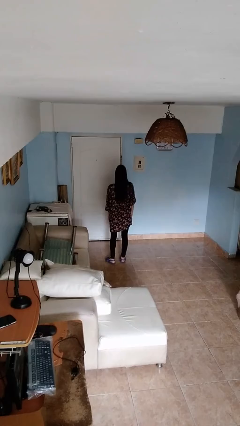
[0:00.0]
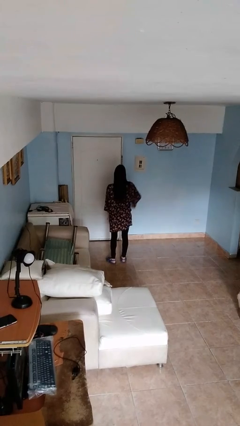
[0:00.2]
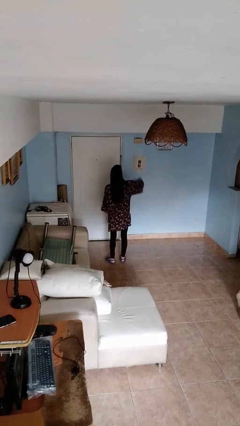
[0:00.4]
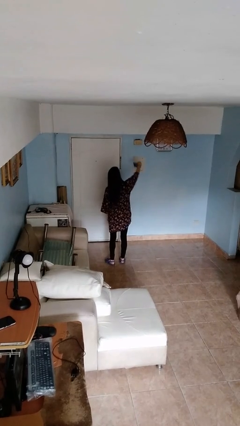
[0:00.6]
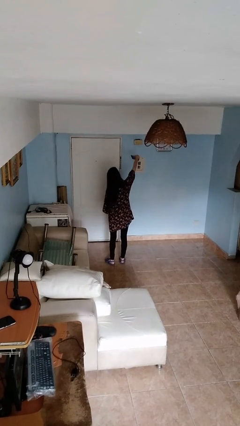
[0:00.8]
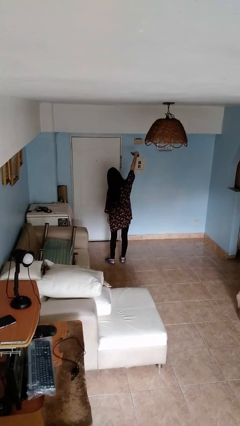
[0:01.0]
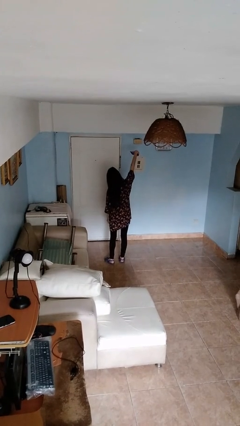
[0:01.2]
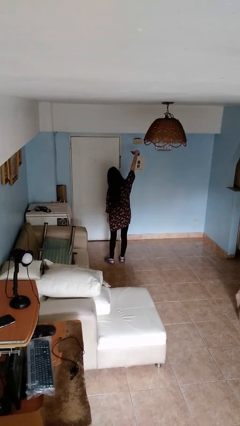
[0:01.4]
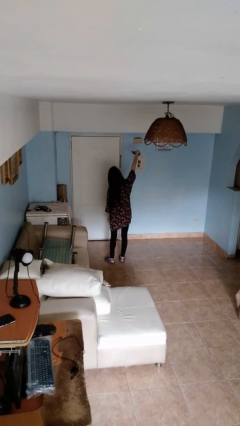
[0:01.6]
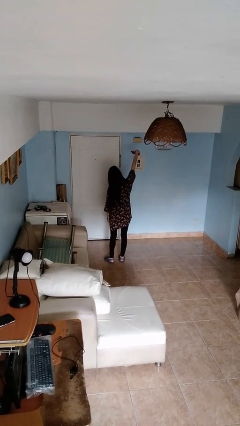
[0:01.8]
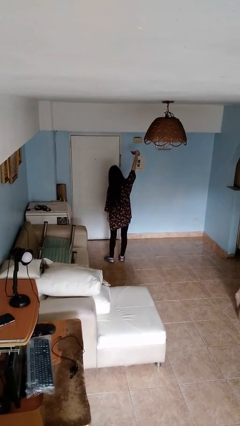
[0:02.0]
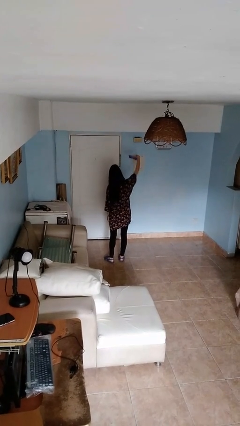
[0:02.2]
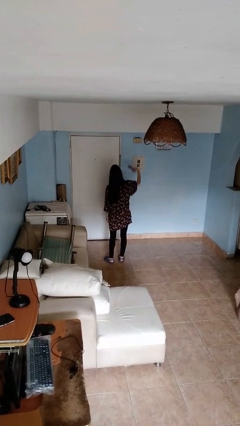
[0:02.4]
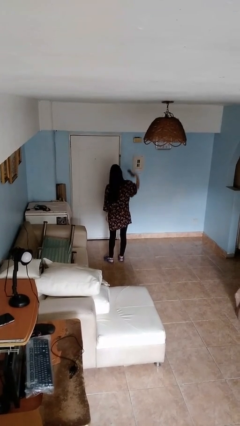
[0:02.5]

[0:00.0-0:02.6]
person takes selfie

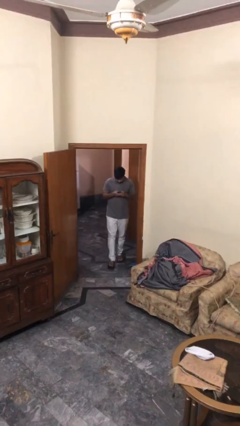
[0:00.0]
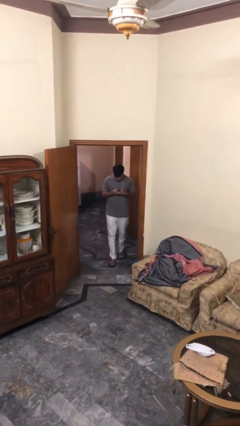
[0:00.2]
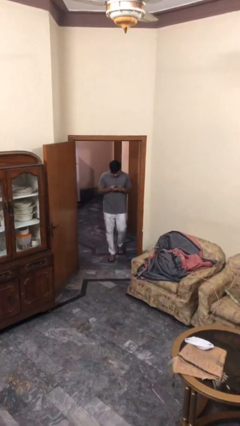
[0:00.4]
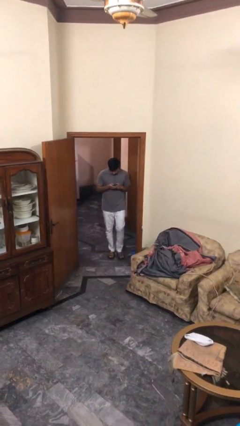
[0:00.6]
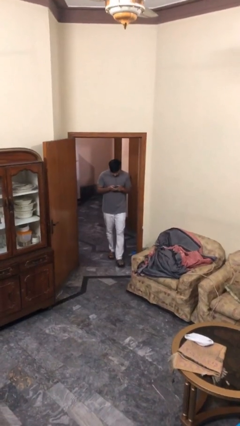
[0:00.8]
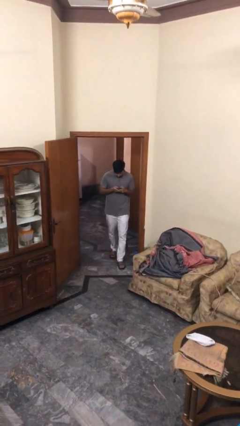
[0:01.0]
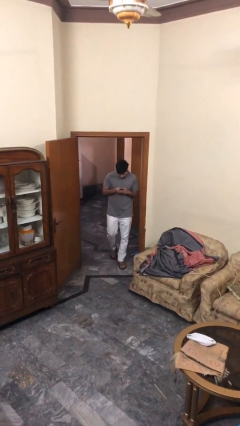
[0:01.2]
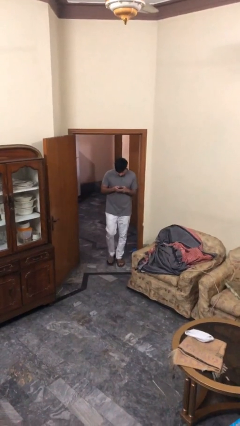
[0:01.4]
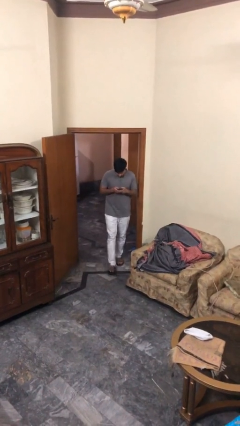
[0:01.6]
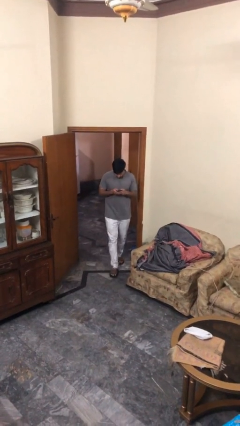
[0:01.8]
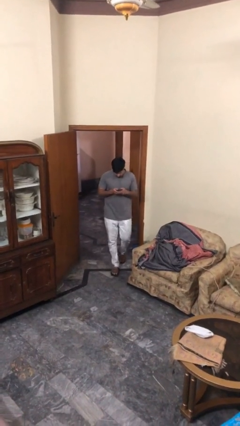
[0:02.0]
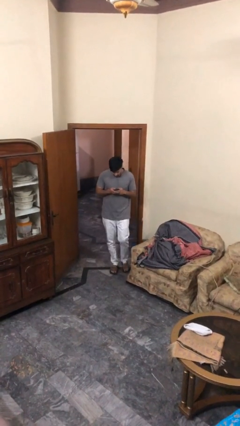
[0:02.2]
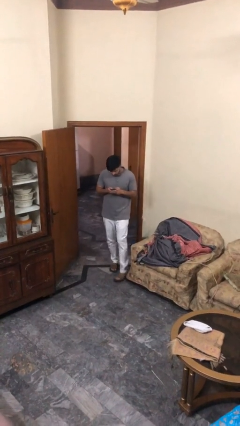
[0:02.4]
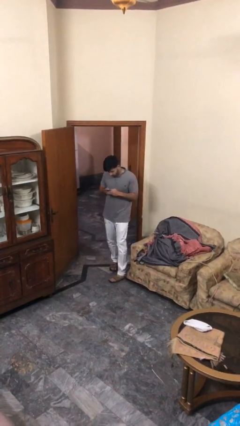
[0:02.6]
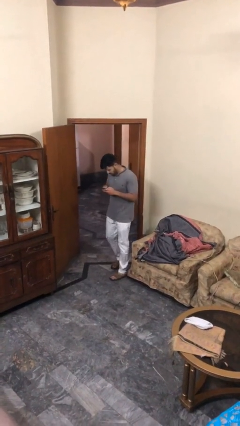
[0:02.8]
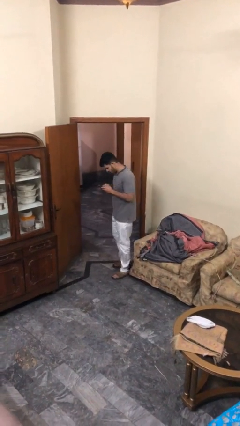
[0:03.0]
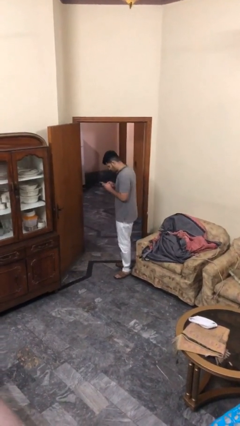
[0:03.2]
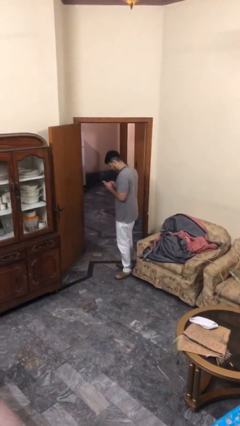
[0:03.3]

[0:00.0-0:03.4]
person enters scene through structure

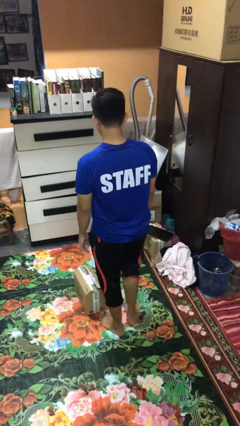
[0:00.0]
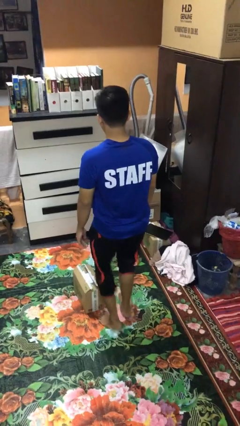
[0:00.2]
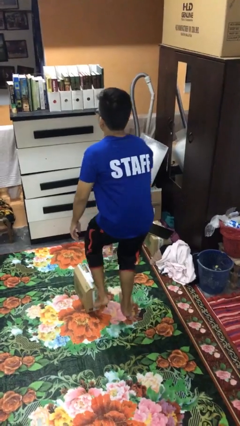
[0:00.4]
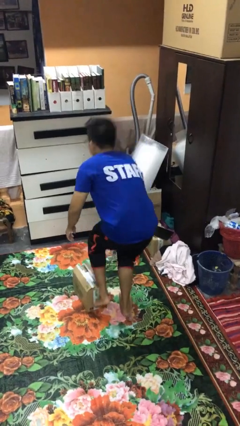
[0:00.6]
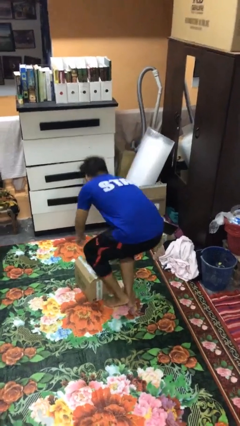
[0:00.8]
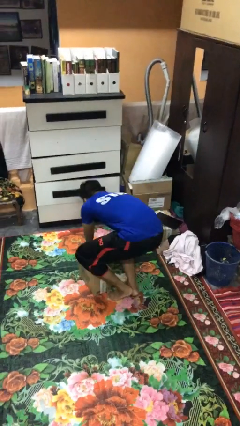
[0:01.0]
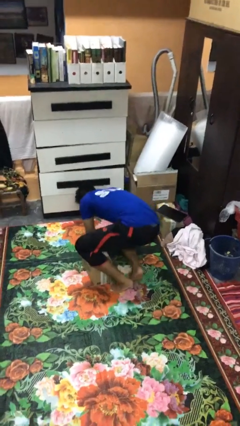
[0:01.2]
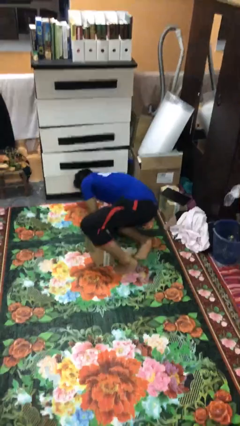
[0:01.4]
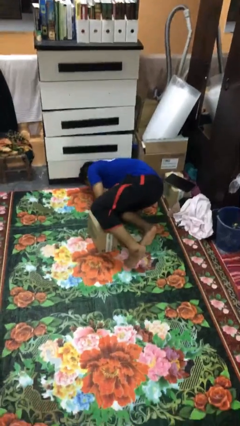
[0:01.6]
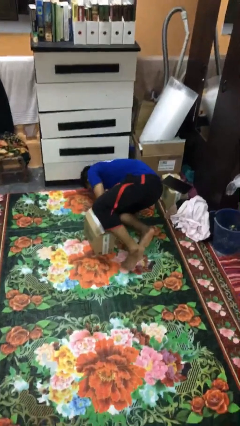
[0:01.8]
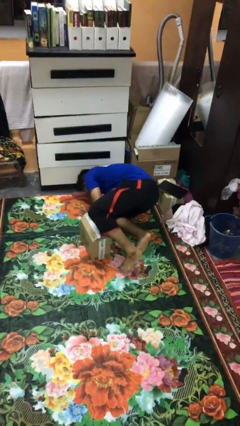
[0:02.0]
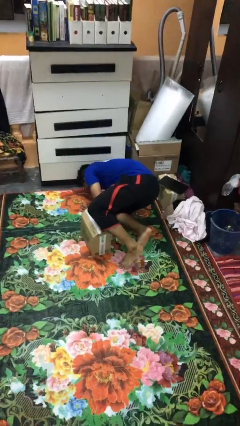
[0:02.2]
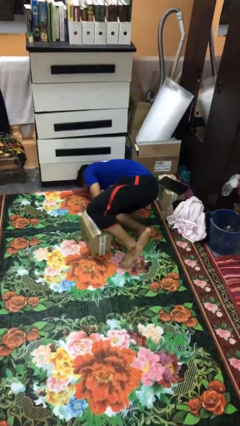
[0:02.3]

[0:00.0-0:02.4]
person trips on object on floor

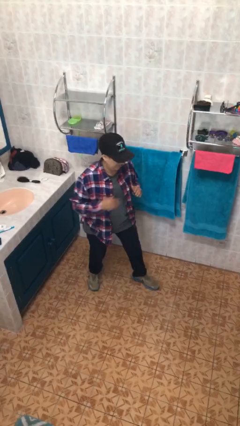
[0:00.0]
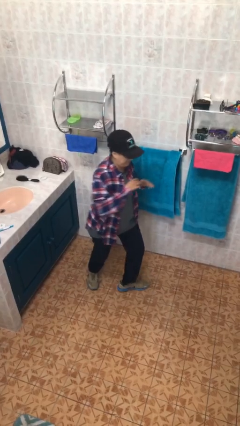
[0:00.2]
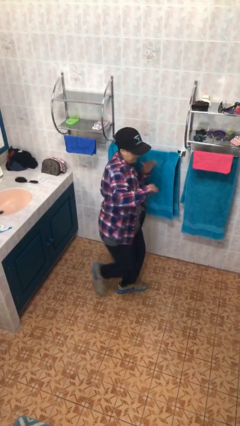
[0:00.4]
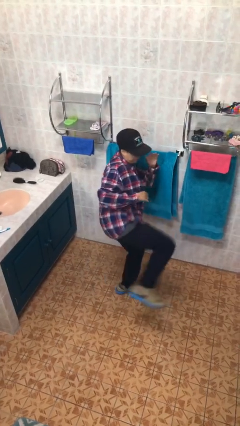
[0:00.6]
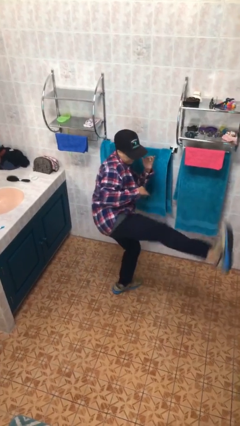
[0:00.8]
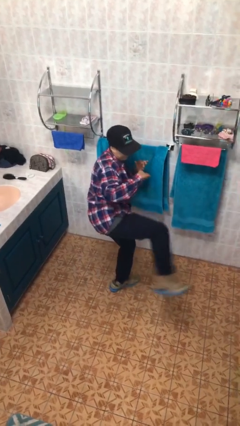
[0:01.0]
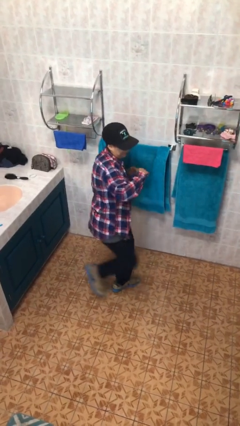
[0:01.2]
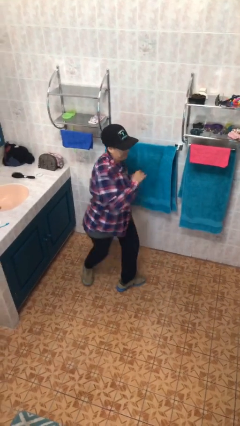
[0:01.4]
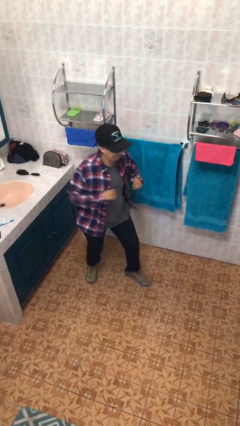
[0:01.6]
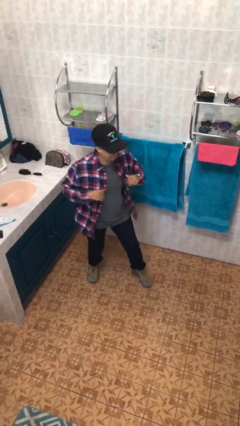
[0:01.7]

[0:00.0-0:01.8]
person karate kicks

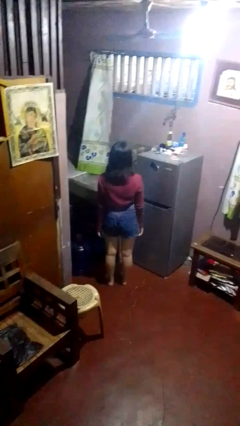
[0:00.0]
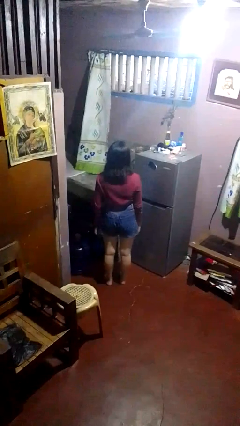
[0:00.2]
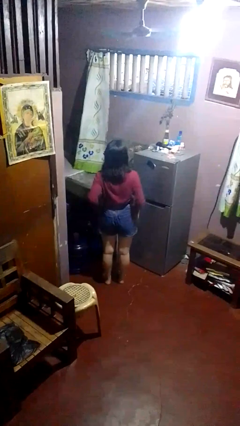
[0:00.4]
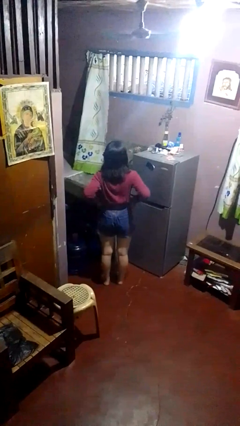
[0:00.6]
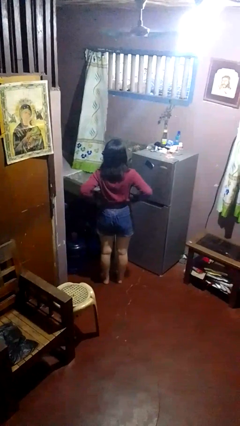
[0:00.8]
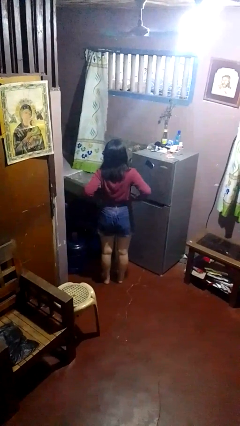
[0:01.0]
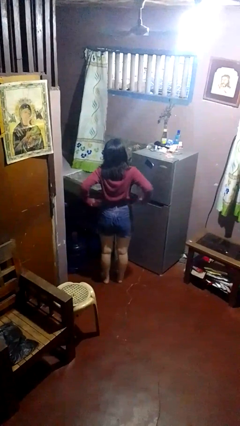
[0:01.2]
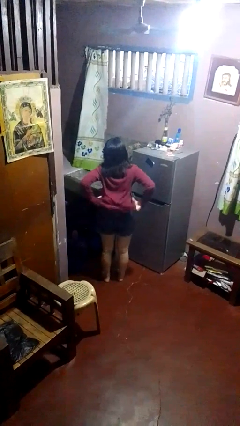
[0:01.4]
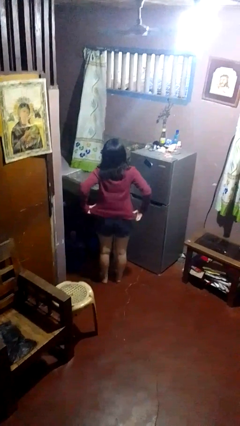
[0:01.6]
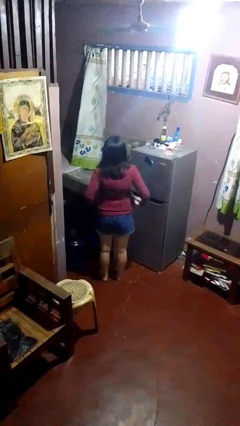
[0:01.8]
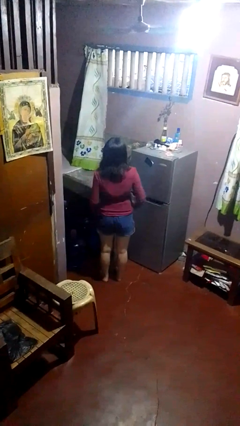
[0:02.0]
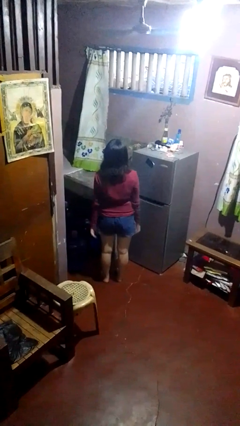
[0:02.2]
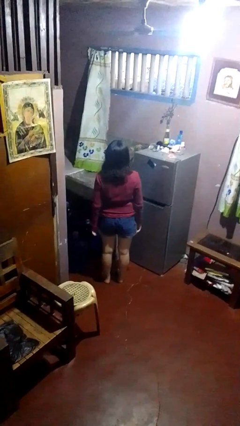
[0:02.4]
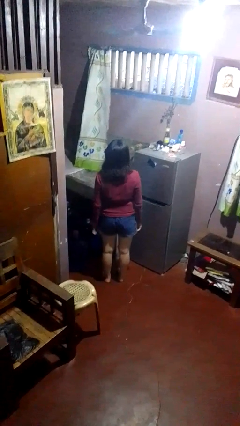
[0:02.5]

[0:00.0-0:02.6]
person untucks shirt

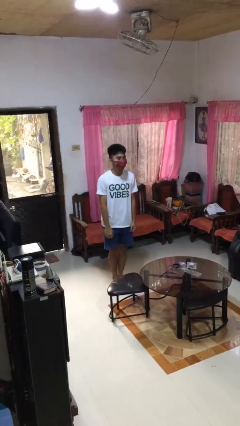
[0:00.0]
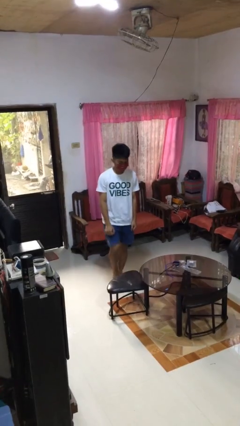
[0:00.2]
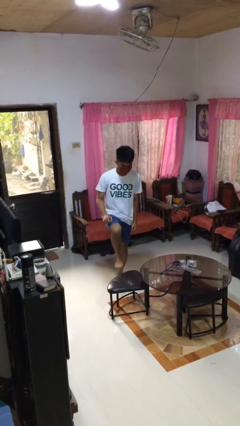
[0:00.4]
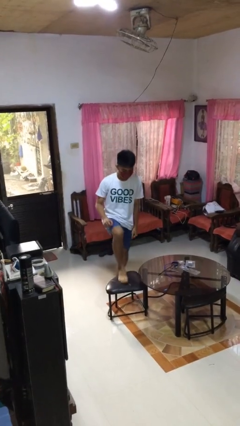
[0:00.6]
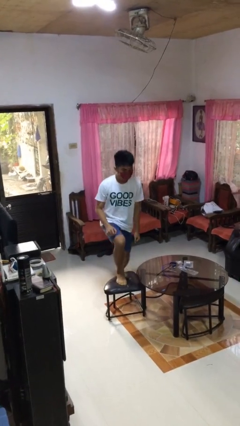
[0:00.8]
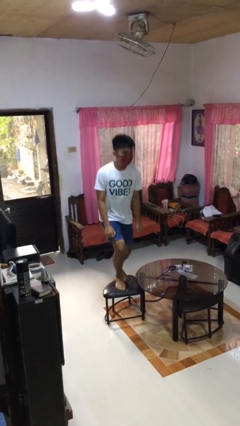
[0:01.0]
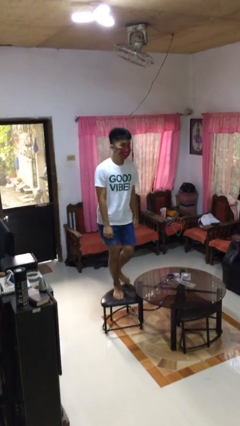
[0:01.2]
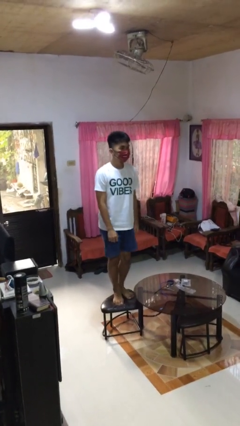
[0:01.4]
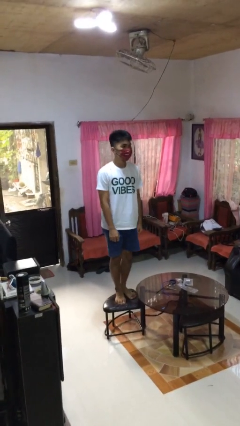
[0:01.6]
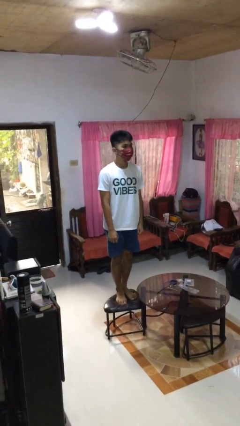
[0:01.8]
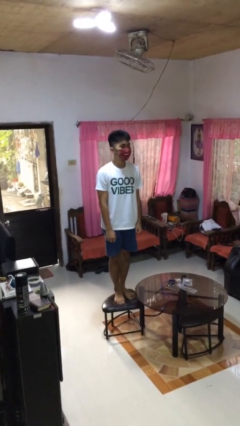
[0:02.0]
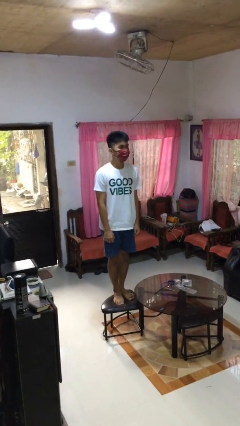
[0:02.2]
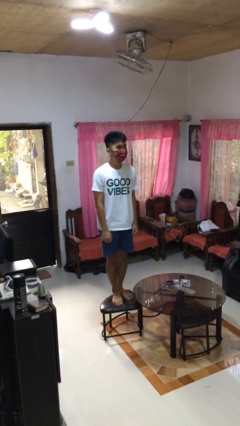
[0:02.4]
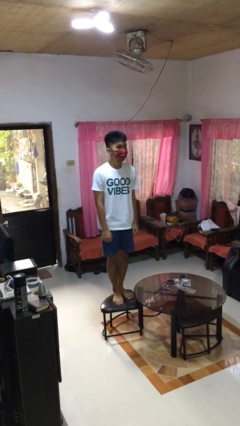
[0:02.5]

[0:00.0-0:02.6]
person climbs on chair

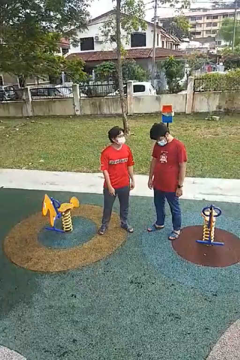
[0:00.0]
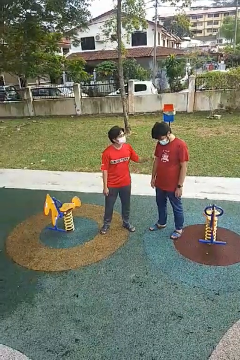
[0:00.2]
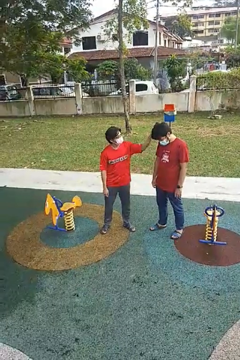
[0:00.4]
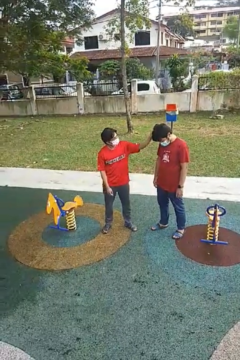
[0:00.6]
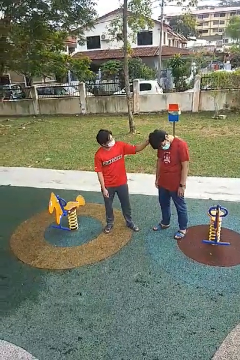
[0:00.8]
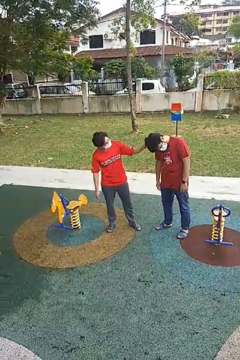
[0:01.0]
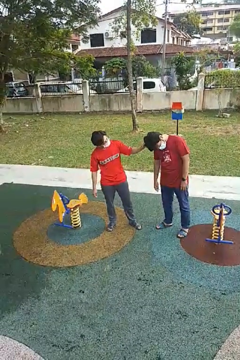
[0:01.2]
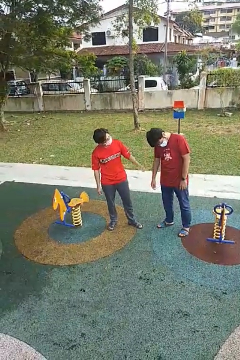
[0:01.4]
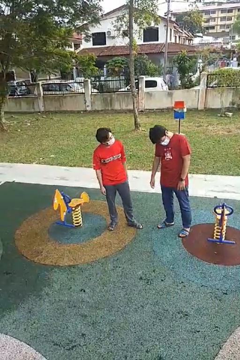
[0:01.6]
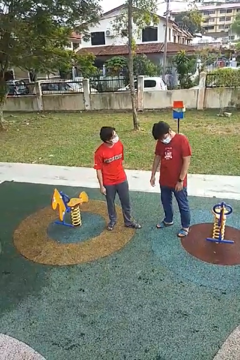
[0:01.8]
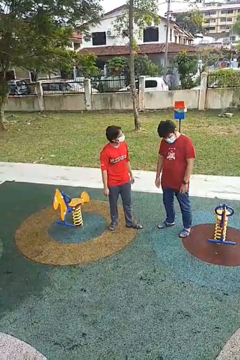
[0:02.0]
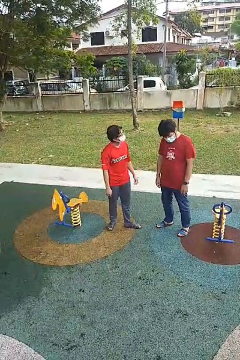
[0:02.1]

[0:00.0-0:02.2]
person grabs person by hair
